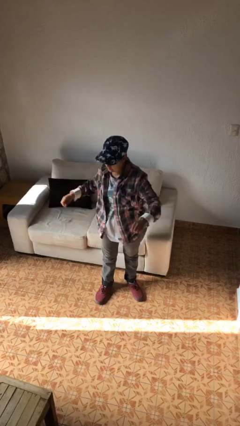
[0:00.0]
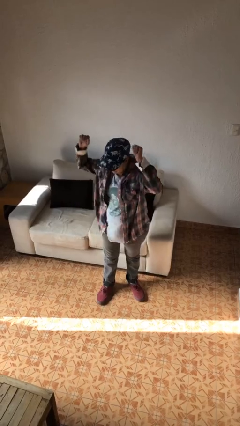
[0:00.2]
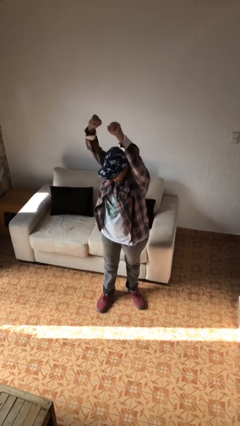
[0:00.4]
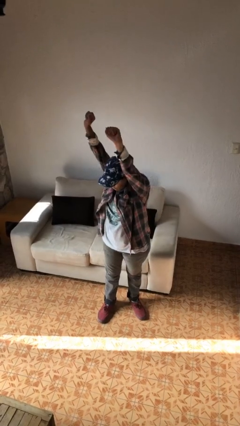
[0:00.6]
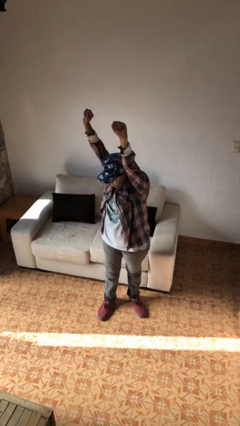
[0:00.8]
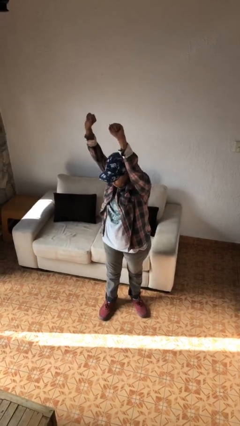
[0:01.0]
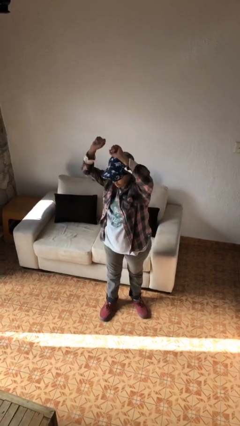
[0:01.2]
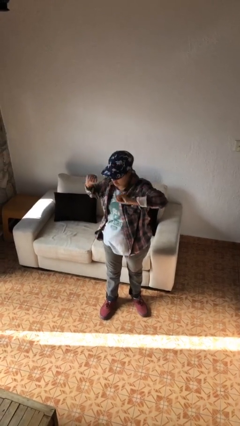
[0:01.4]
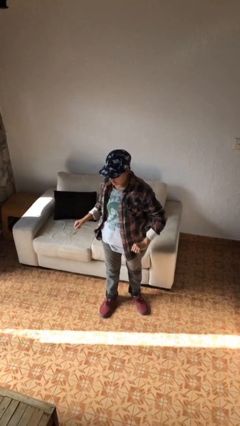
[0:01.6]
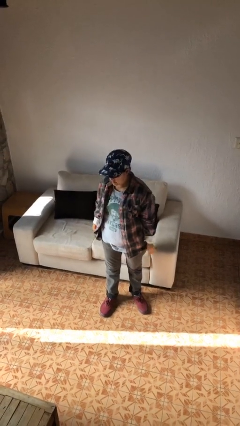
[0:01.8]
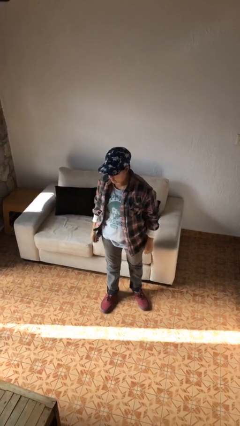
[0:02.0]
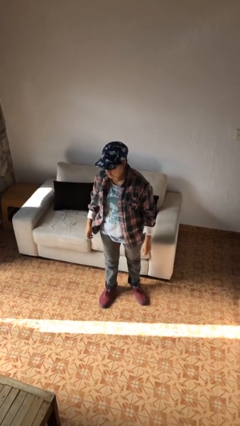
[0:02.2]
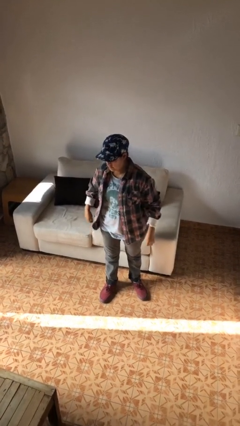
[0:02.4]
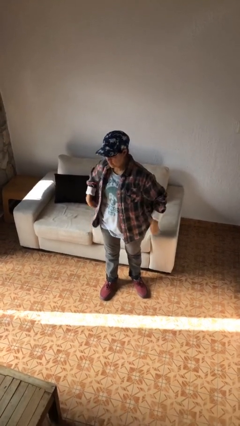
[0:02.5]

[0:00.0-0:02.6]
person stretches arms over head

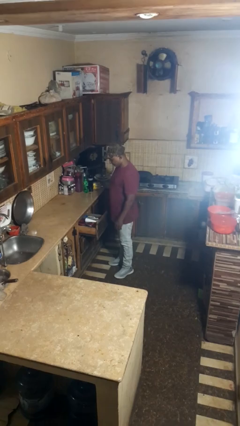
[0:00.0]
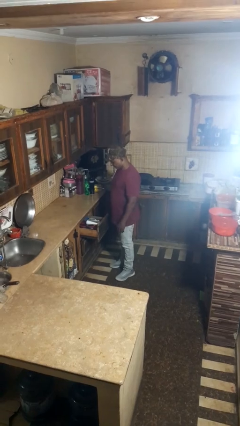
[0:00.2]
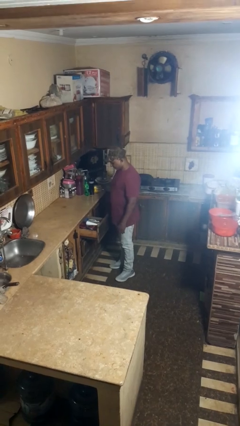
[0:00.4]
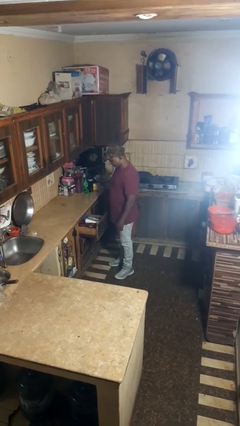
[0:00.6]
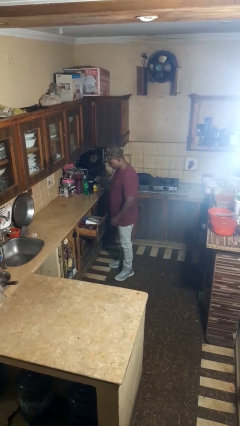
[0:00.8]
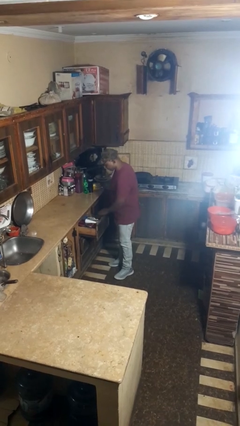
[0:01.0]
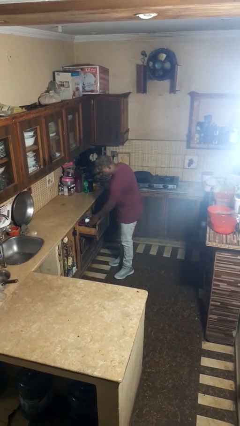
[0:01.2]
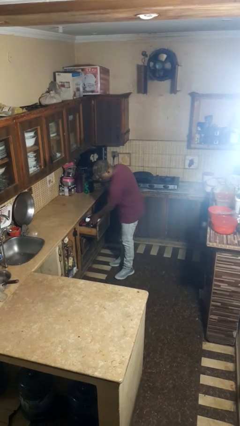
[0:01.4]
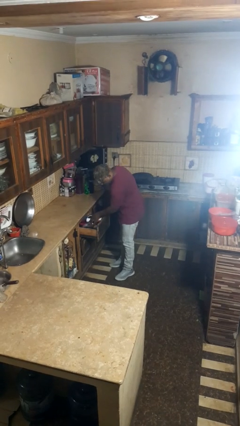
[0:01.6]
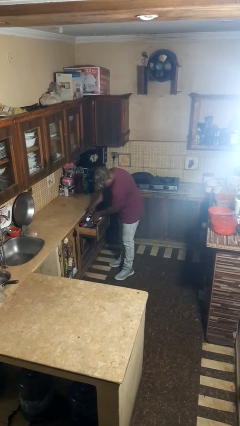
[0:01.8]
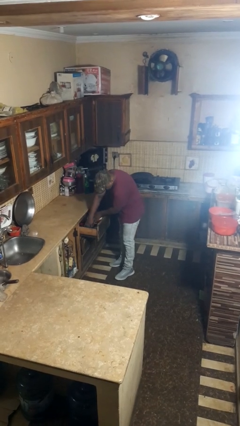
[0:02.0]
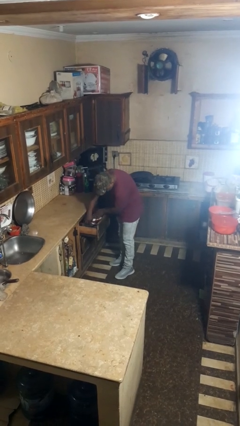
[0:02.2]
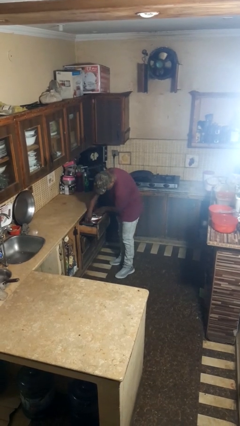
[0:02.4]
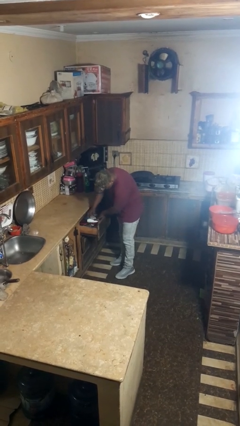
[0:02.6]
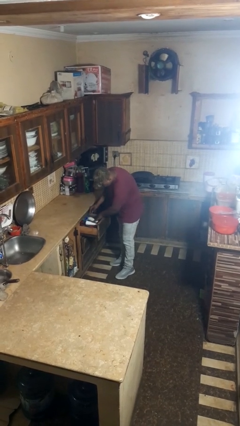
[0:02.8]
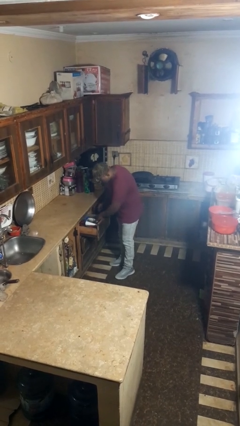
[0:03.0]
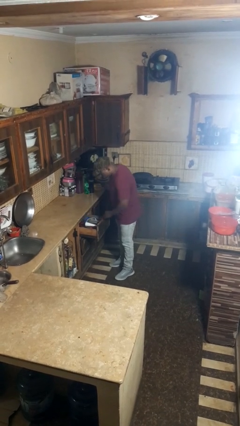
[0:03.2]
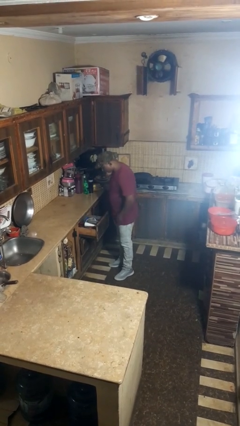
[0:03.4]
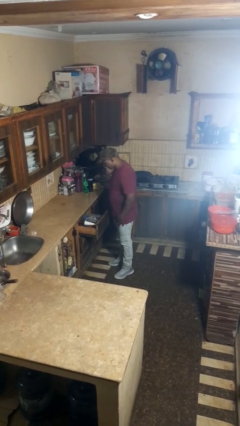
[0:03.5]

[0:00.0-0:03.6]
person searches in kitchen drawer

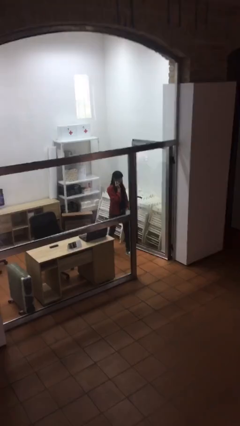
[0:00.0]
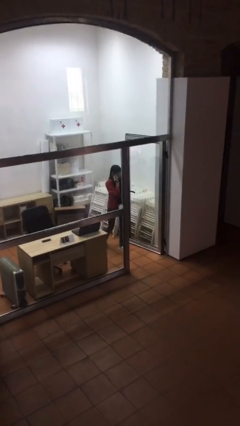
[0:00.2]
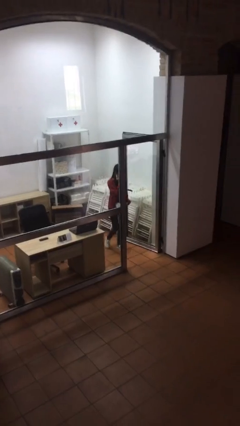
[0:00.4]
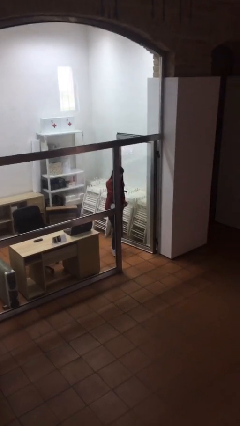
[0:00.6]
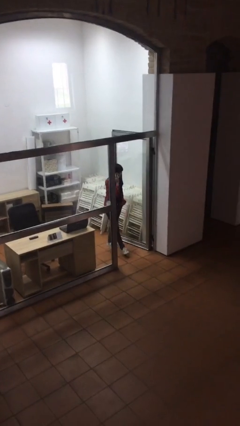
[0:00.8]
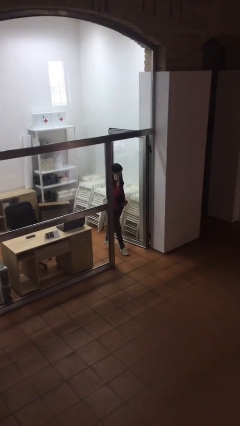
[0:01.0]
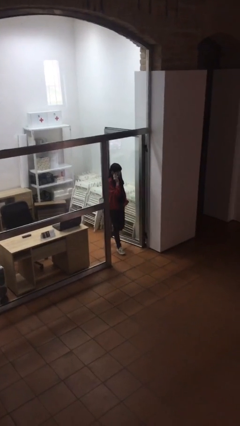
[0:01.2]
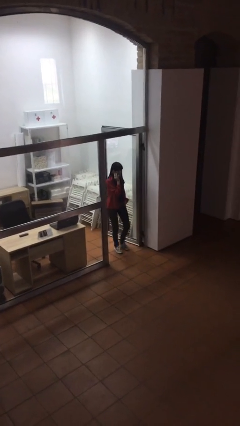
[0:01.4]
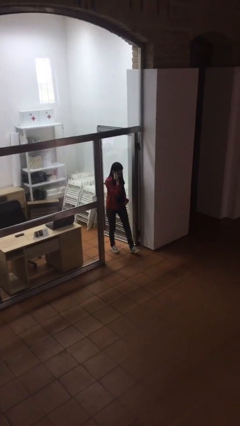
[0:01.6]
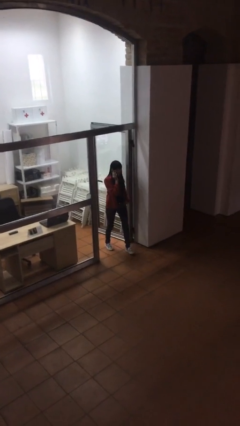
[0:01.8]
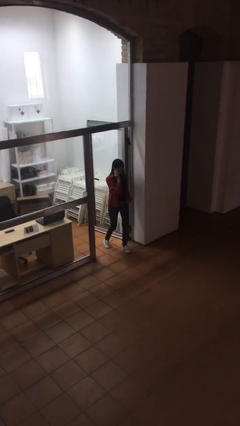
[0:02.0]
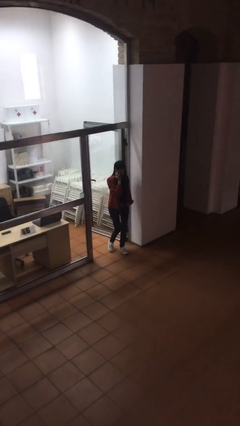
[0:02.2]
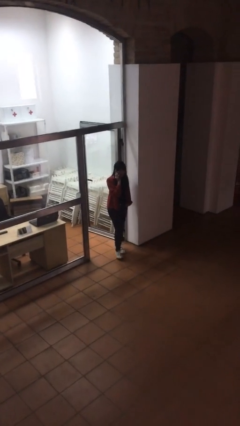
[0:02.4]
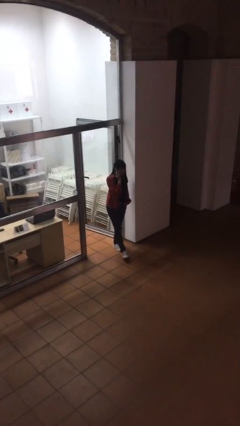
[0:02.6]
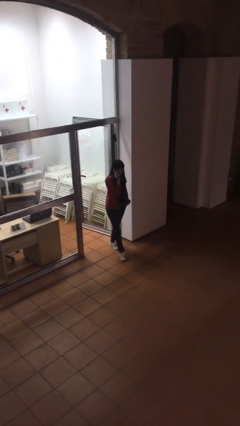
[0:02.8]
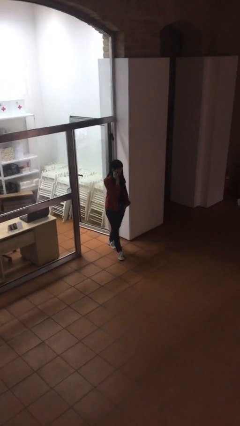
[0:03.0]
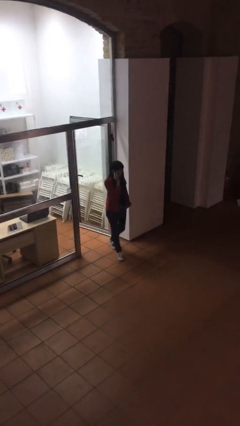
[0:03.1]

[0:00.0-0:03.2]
person enters scene through structure

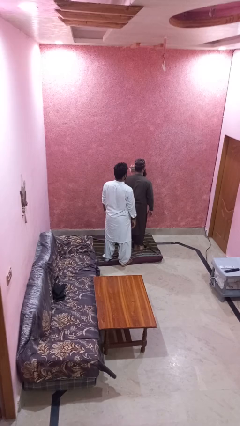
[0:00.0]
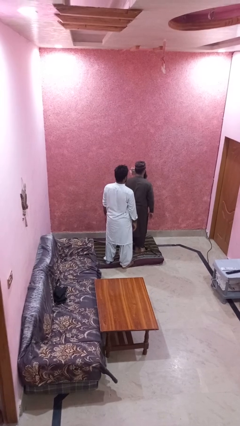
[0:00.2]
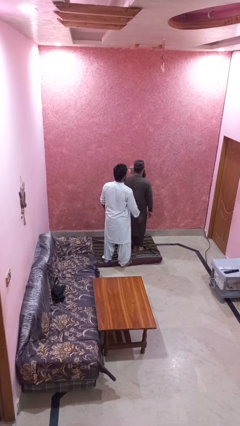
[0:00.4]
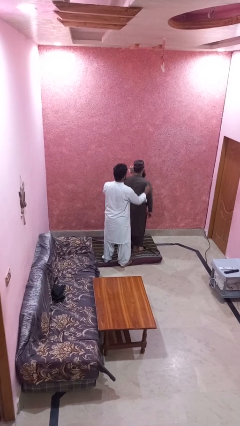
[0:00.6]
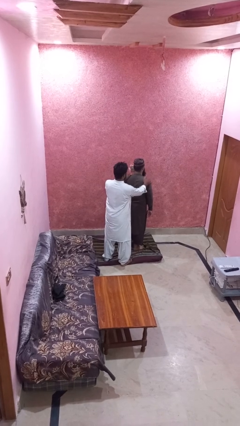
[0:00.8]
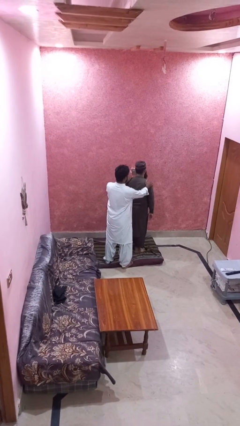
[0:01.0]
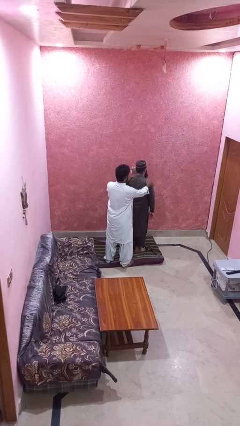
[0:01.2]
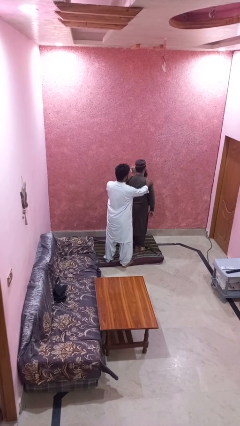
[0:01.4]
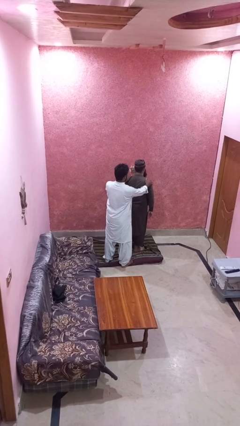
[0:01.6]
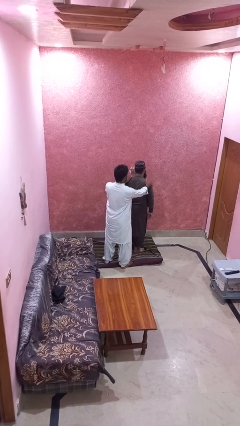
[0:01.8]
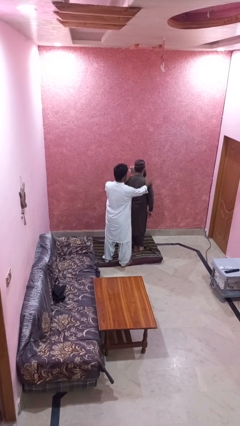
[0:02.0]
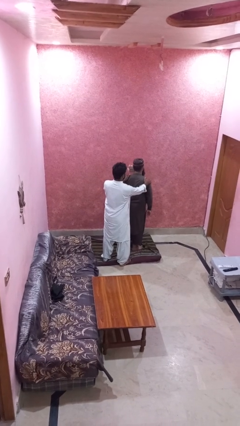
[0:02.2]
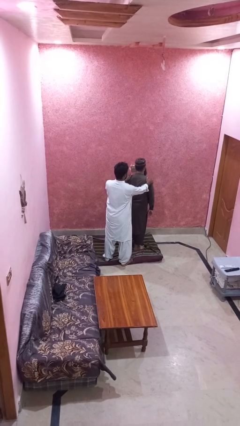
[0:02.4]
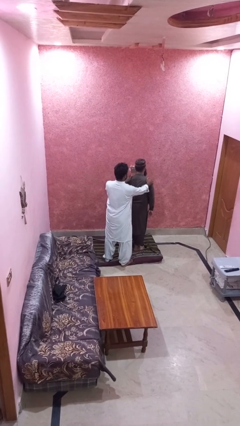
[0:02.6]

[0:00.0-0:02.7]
person grabs person by shoulder

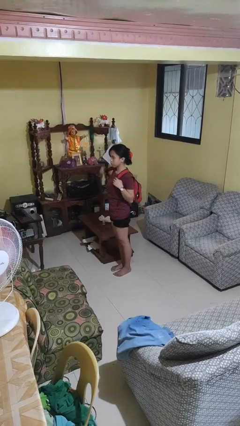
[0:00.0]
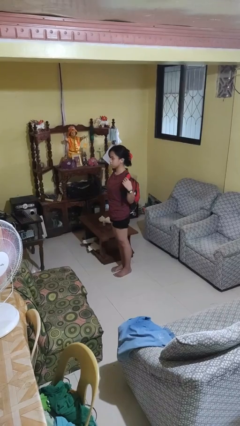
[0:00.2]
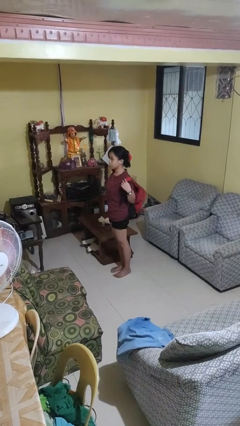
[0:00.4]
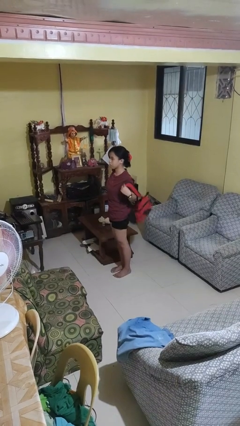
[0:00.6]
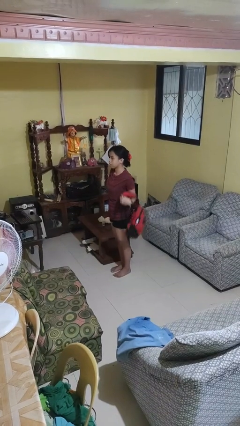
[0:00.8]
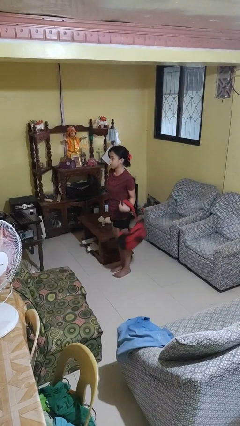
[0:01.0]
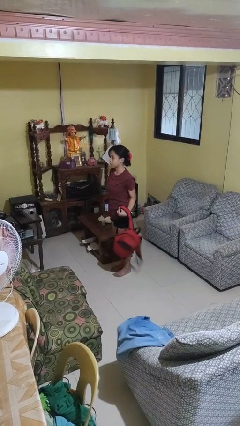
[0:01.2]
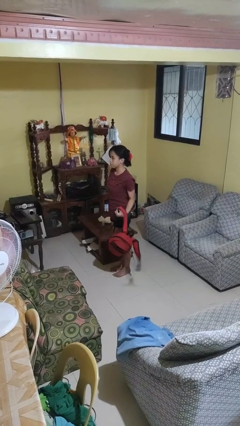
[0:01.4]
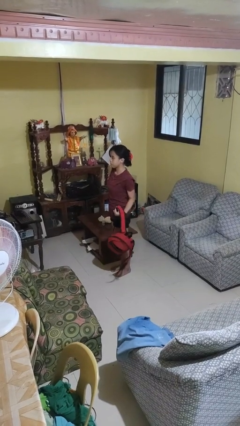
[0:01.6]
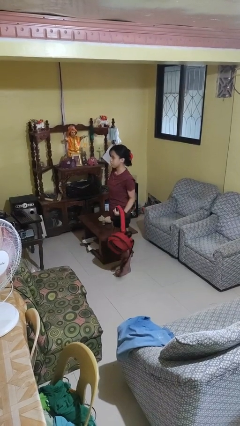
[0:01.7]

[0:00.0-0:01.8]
person takes off backpack

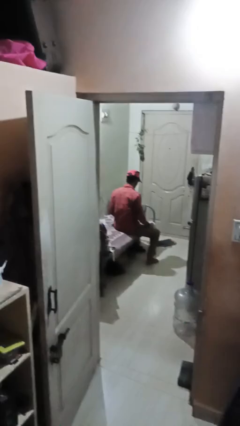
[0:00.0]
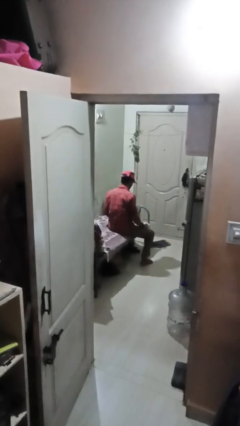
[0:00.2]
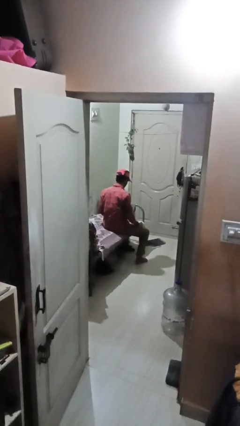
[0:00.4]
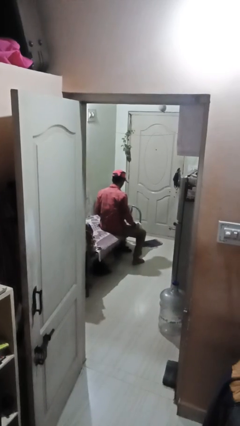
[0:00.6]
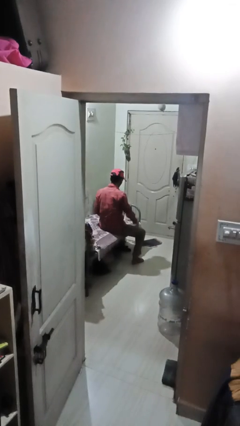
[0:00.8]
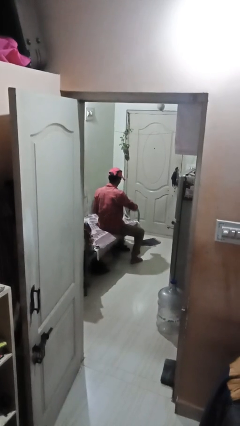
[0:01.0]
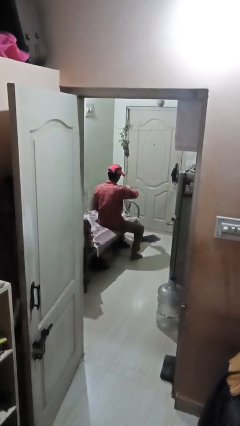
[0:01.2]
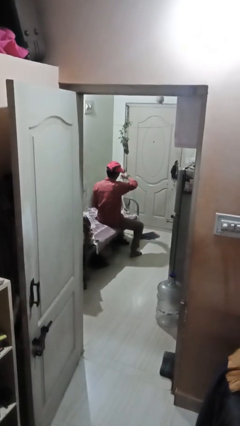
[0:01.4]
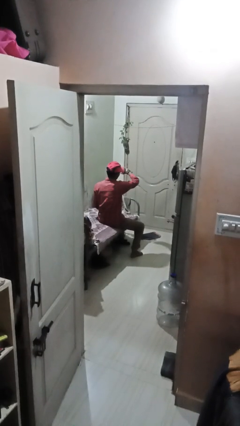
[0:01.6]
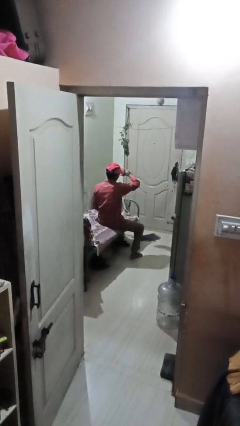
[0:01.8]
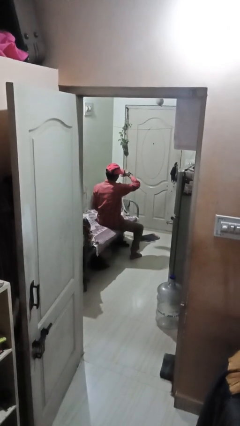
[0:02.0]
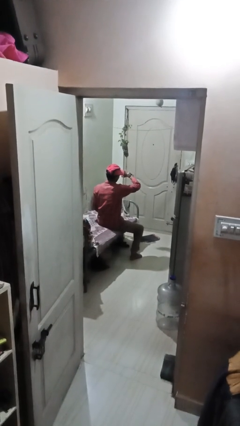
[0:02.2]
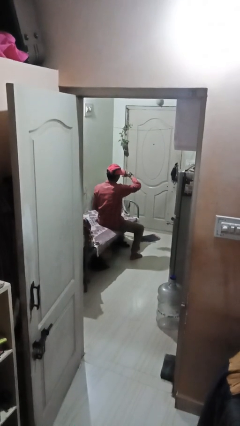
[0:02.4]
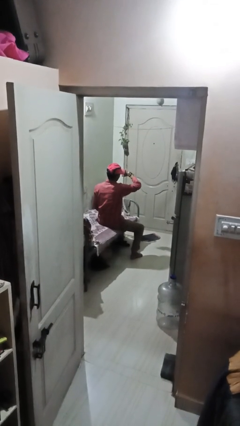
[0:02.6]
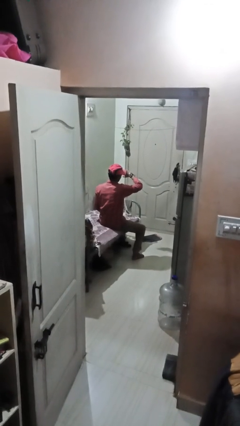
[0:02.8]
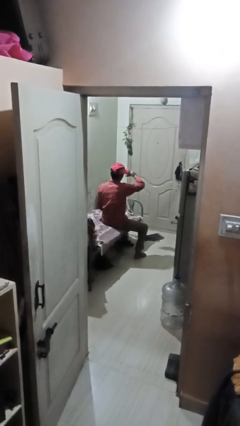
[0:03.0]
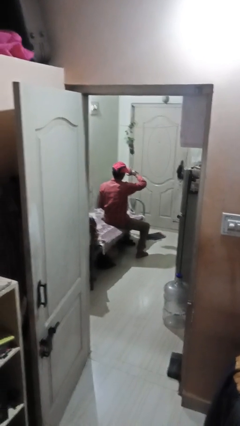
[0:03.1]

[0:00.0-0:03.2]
person looks at wristwatch

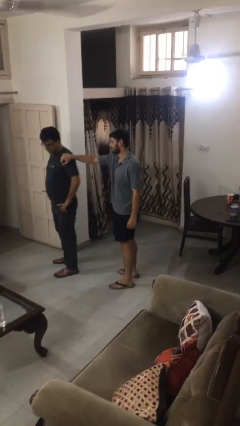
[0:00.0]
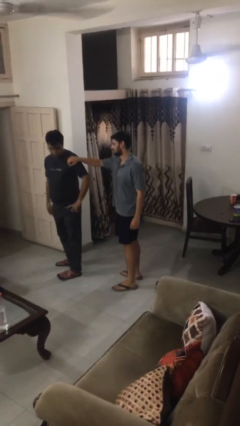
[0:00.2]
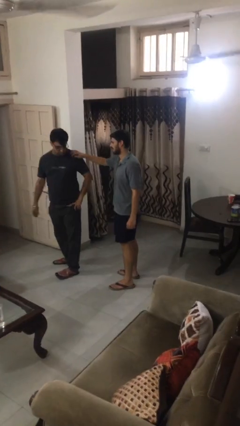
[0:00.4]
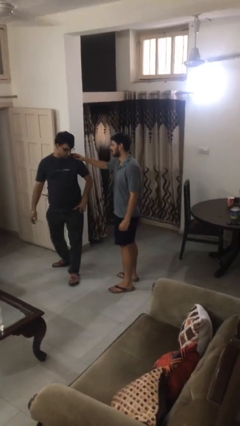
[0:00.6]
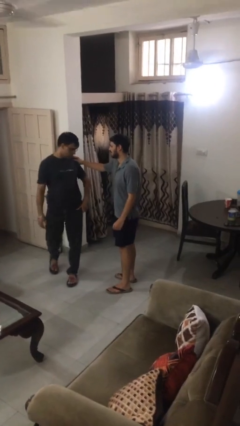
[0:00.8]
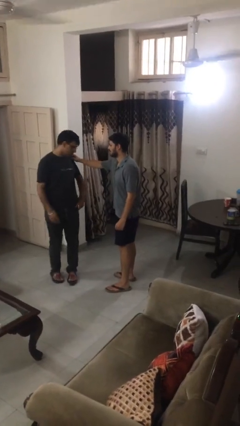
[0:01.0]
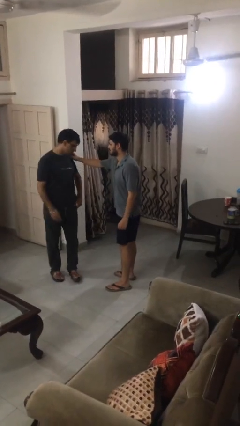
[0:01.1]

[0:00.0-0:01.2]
person spins person around
